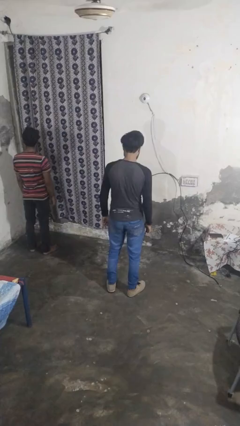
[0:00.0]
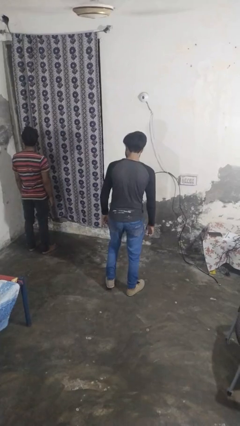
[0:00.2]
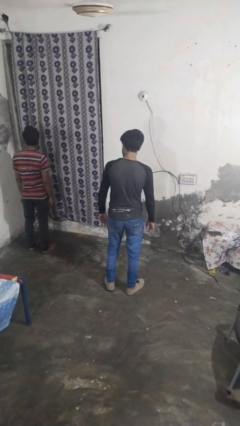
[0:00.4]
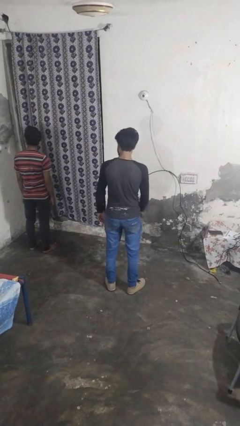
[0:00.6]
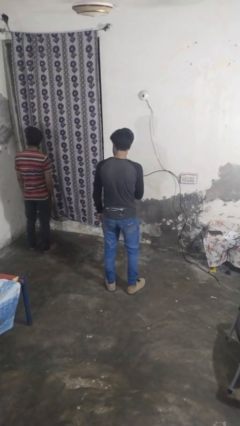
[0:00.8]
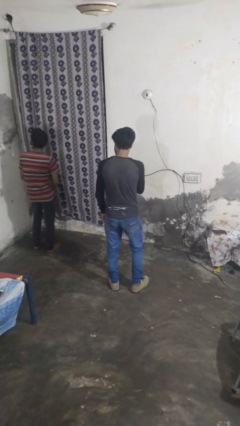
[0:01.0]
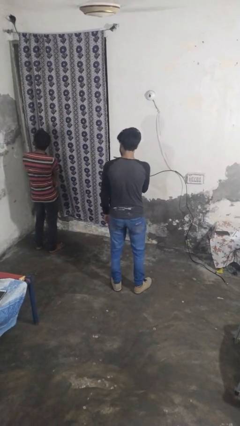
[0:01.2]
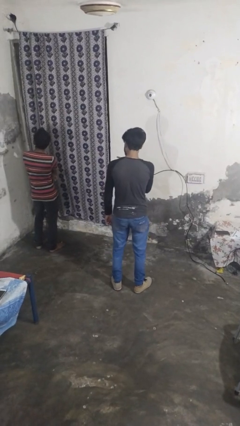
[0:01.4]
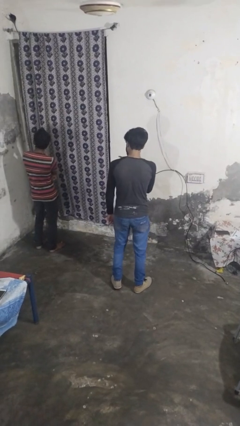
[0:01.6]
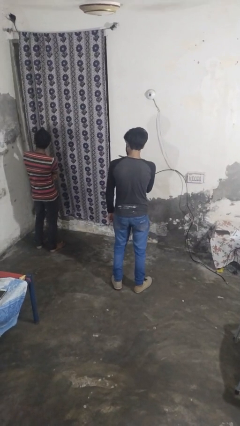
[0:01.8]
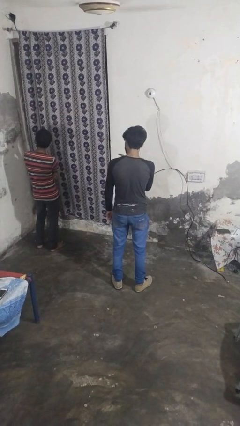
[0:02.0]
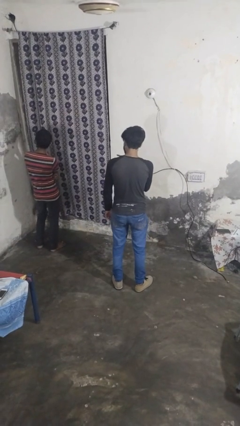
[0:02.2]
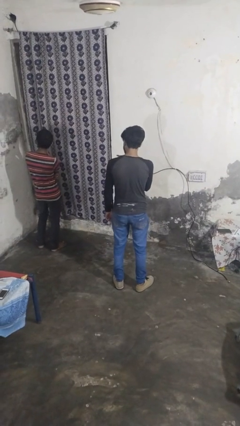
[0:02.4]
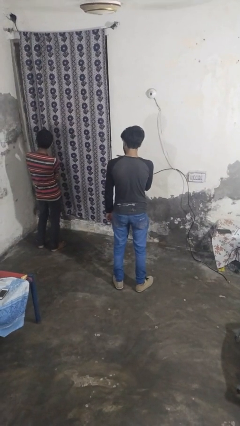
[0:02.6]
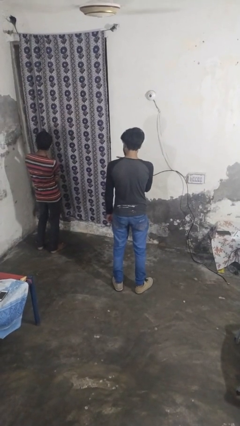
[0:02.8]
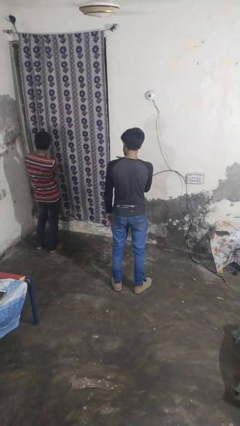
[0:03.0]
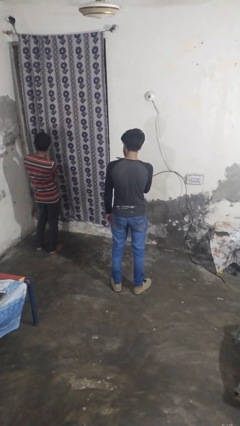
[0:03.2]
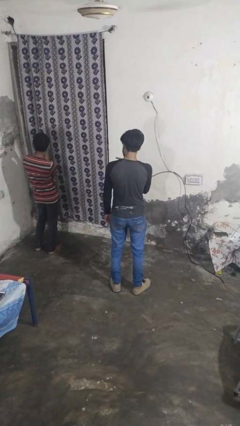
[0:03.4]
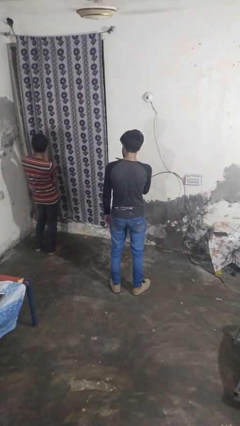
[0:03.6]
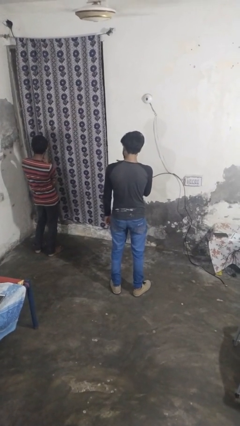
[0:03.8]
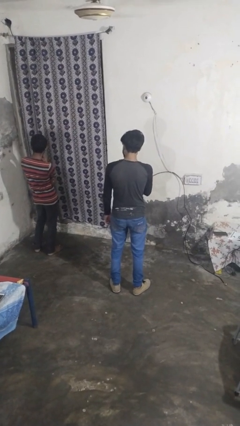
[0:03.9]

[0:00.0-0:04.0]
person points at person

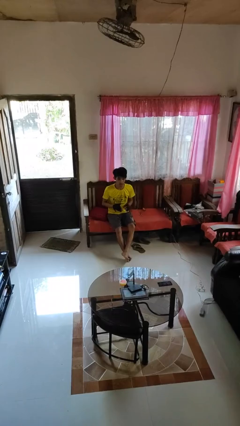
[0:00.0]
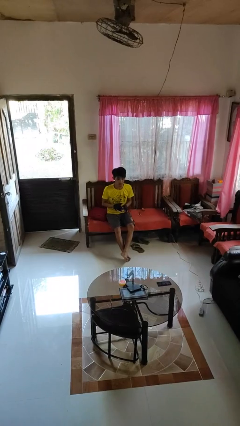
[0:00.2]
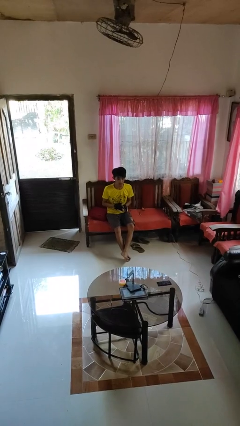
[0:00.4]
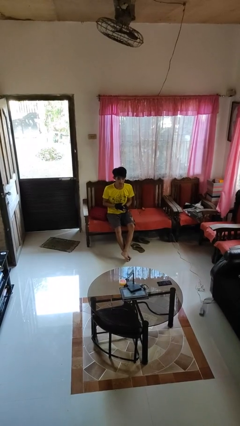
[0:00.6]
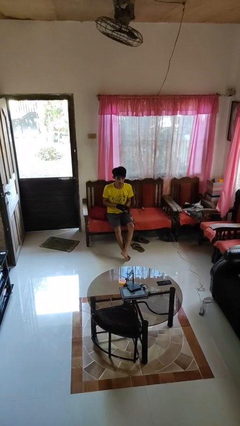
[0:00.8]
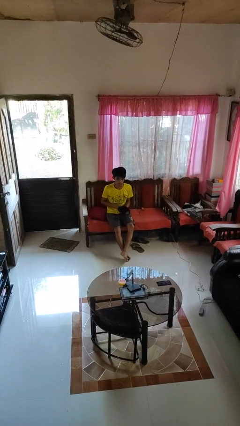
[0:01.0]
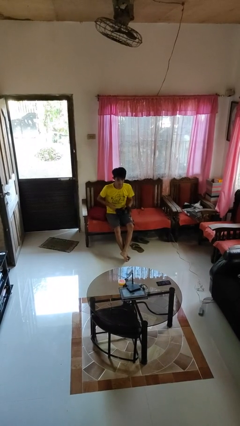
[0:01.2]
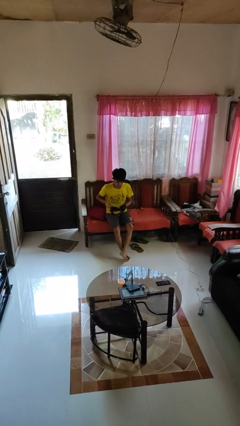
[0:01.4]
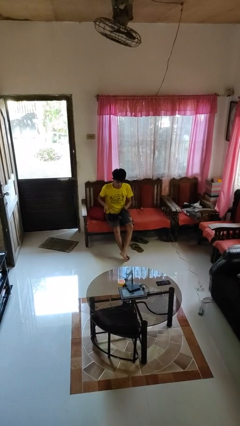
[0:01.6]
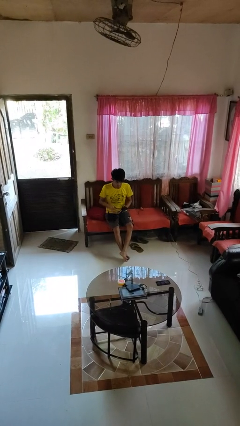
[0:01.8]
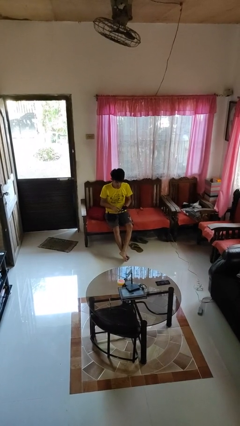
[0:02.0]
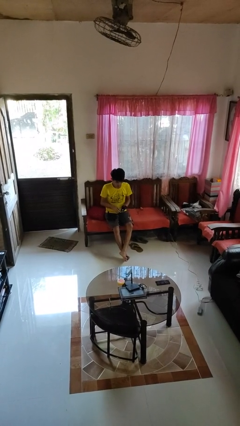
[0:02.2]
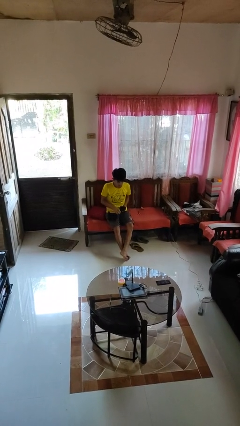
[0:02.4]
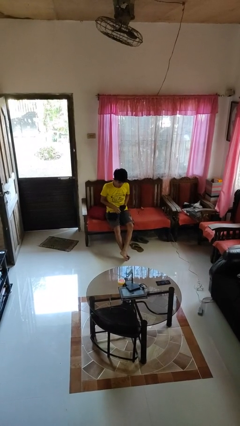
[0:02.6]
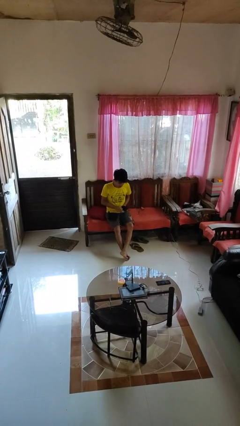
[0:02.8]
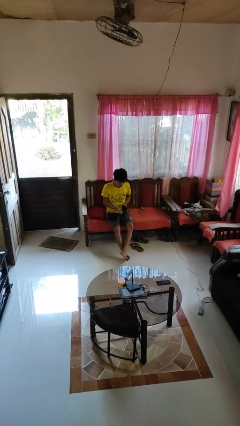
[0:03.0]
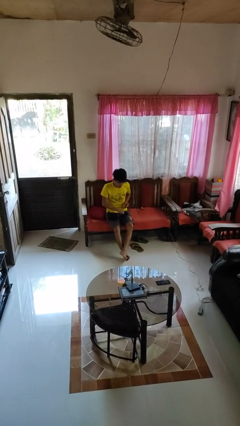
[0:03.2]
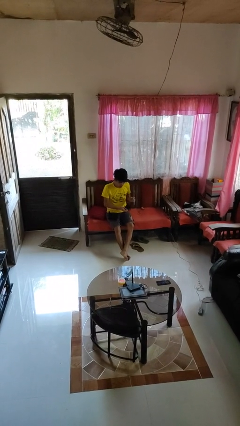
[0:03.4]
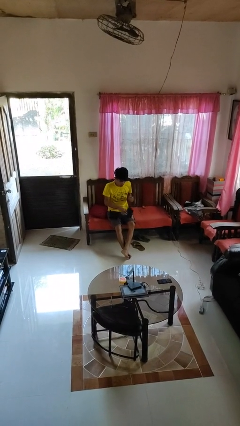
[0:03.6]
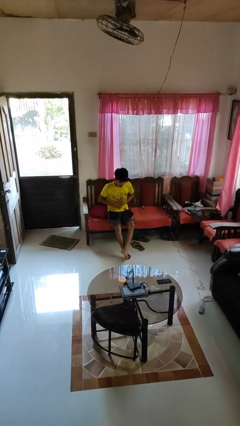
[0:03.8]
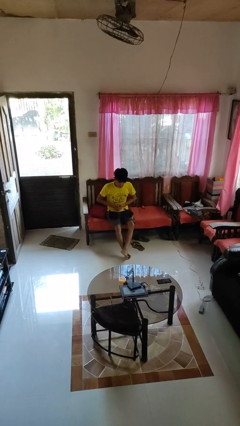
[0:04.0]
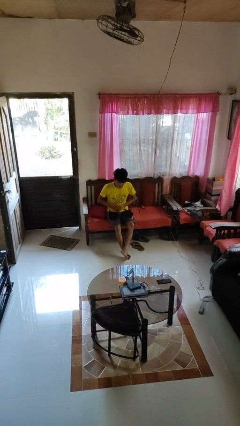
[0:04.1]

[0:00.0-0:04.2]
person takes off gloves

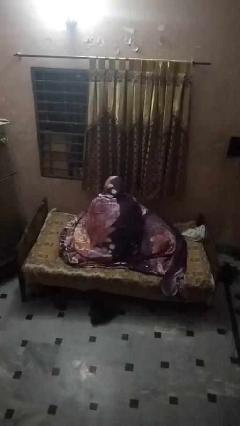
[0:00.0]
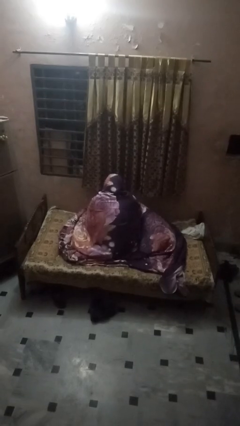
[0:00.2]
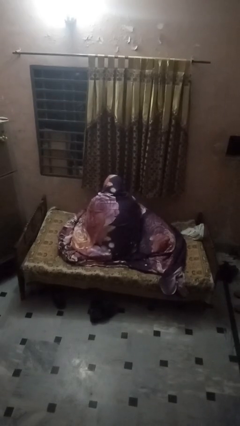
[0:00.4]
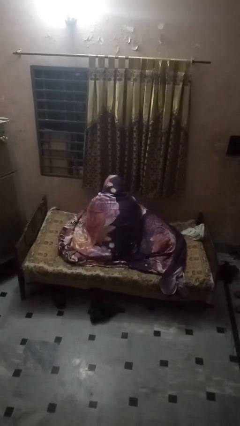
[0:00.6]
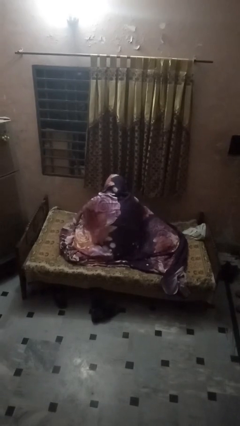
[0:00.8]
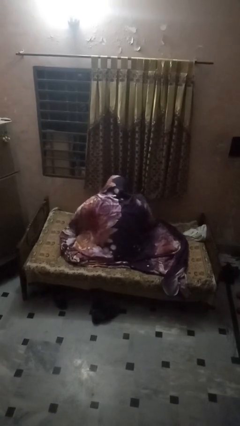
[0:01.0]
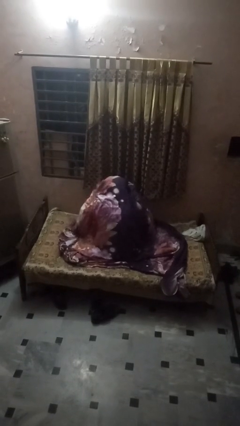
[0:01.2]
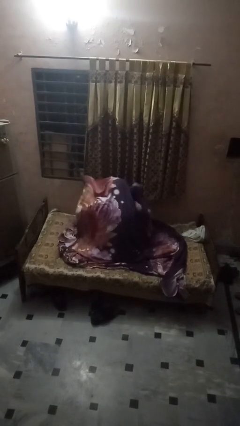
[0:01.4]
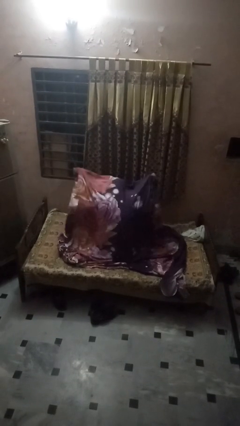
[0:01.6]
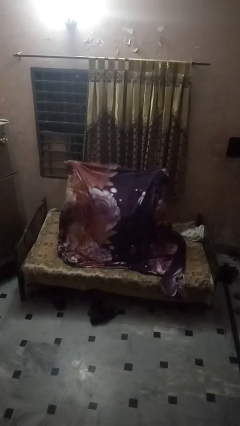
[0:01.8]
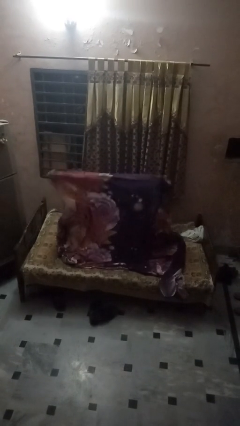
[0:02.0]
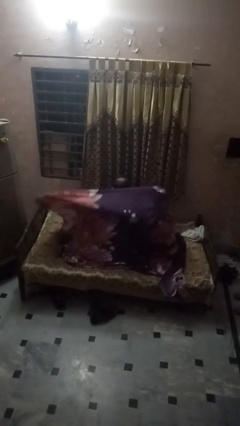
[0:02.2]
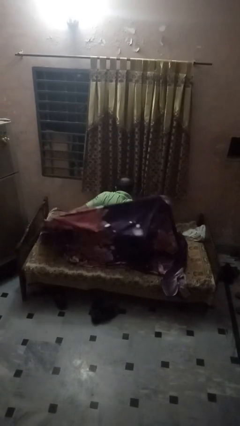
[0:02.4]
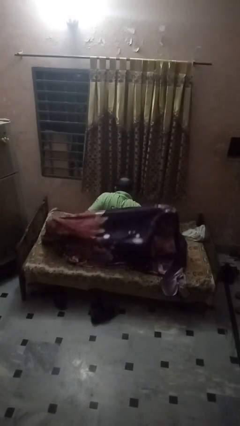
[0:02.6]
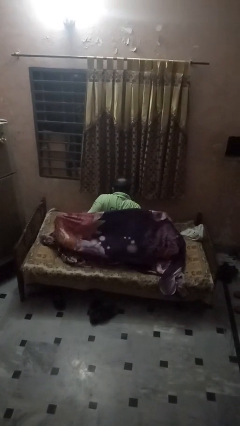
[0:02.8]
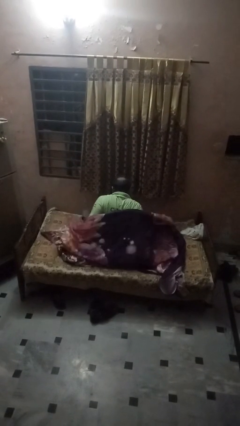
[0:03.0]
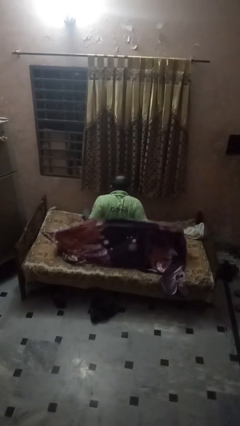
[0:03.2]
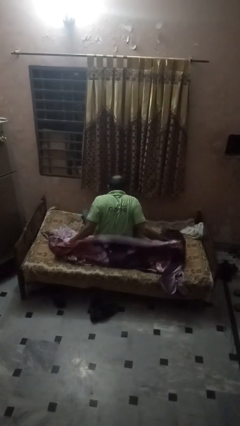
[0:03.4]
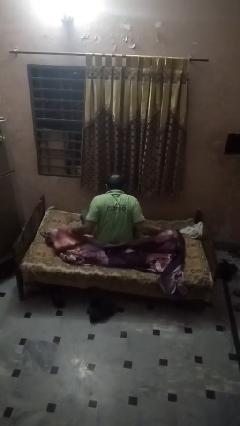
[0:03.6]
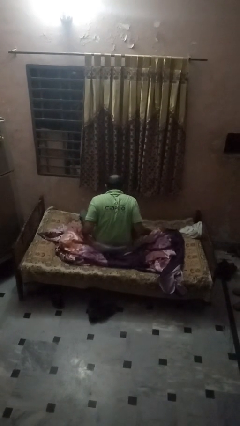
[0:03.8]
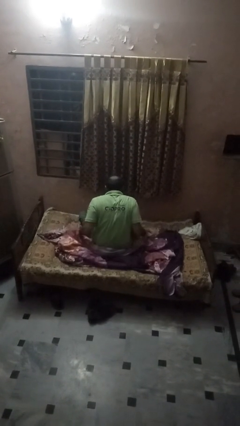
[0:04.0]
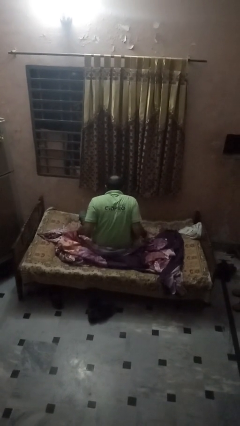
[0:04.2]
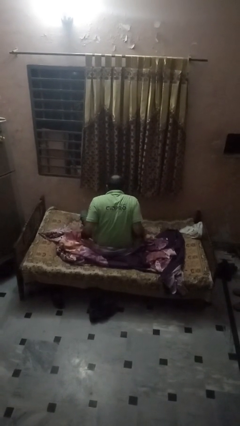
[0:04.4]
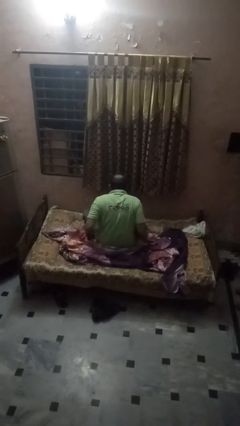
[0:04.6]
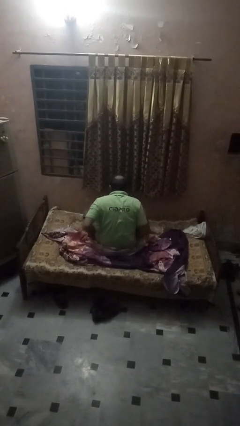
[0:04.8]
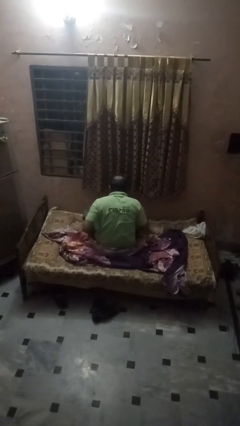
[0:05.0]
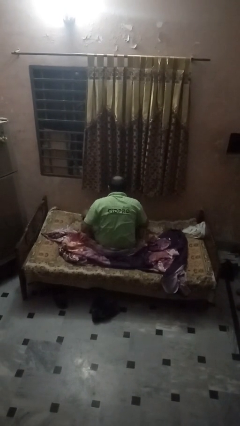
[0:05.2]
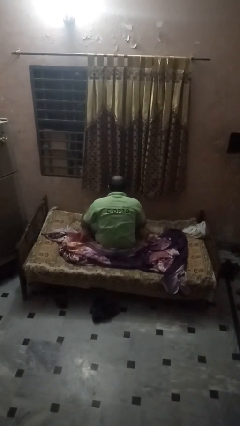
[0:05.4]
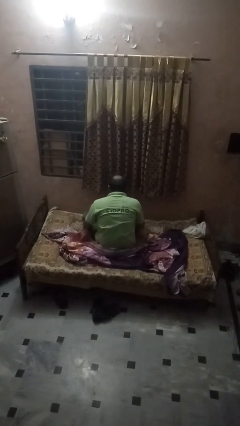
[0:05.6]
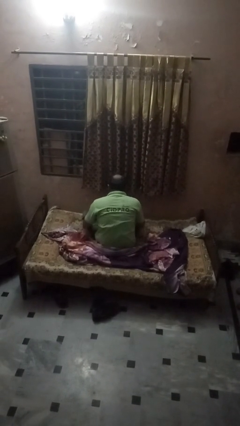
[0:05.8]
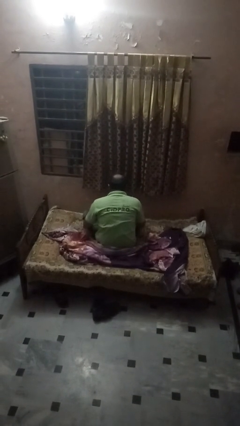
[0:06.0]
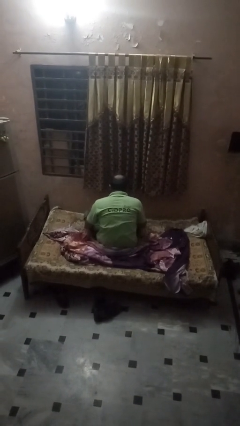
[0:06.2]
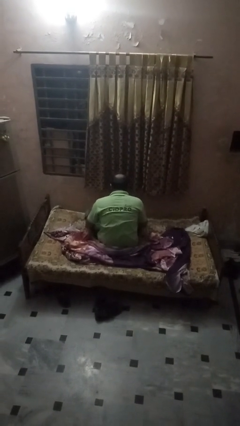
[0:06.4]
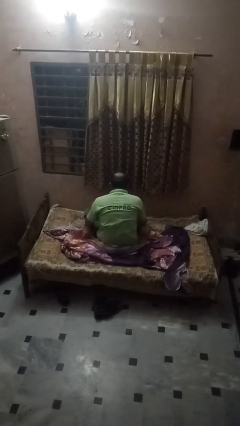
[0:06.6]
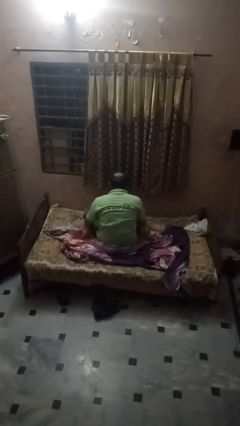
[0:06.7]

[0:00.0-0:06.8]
person uncovers with bedsheets

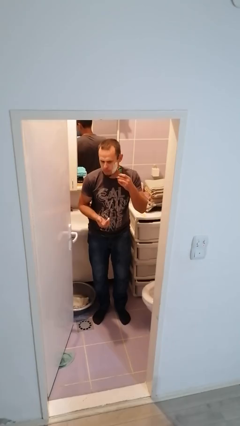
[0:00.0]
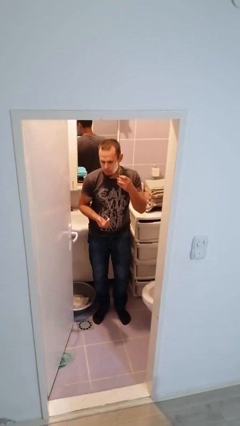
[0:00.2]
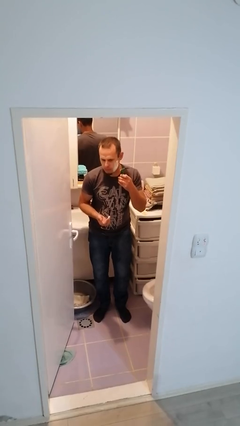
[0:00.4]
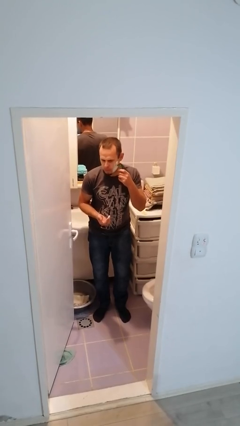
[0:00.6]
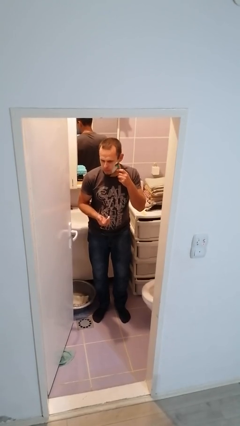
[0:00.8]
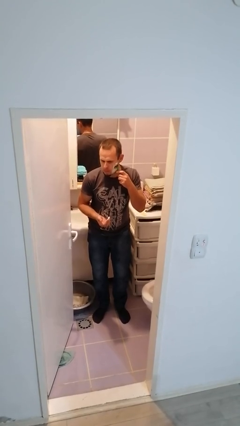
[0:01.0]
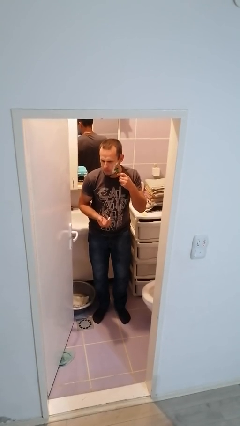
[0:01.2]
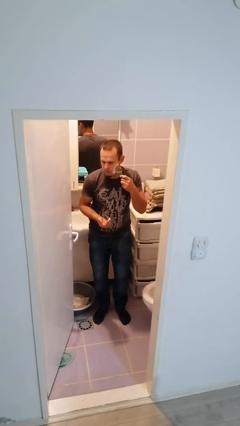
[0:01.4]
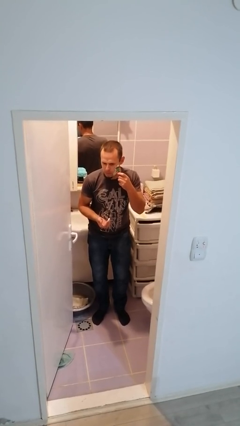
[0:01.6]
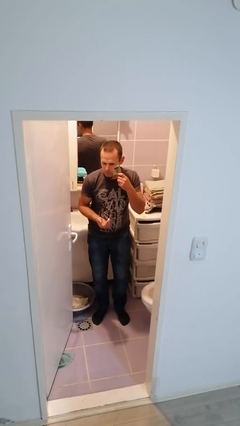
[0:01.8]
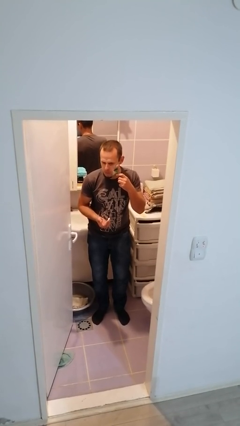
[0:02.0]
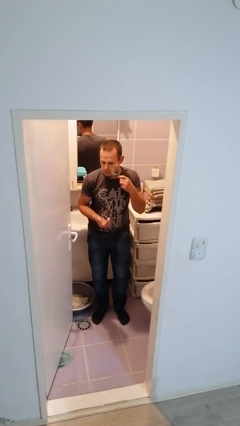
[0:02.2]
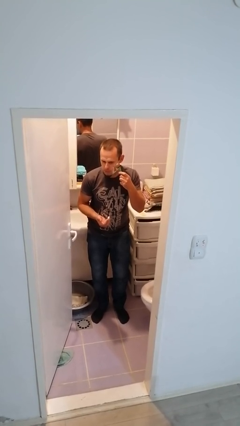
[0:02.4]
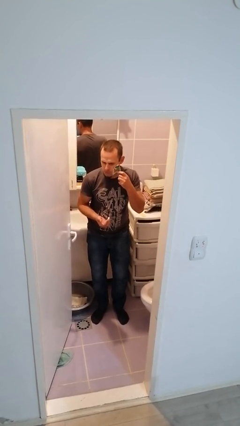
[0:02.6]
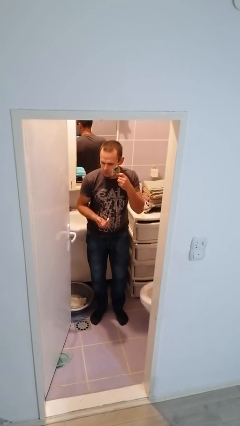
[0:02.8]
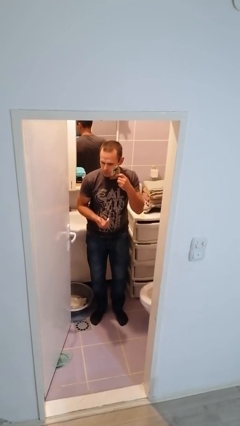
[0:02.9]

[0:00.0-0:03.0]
person shaves face
